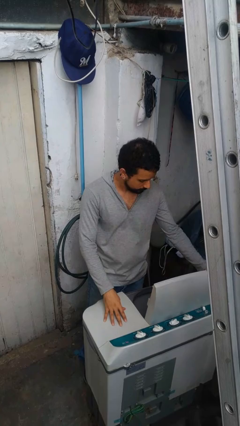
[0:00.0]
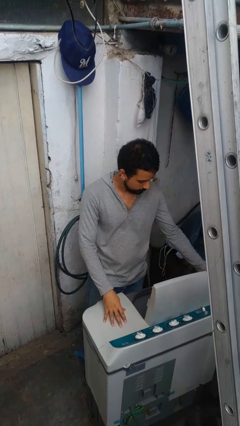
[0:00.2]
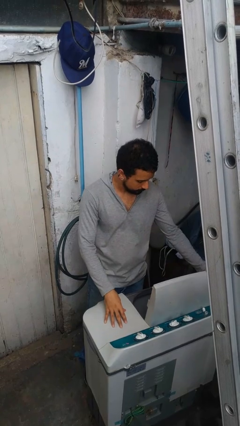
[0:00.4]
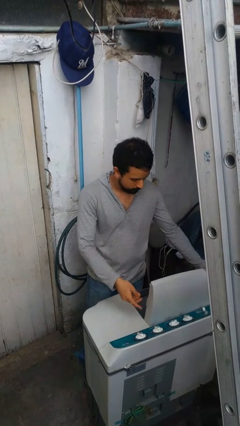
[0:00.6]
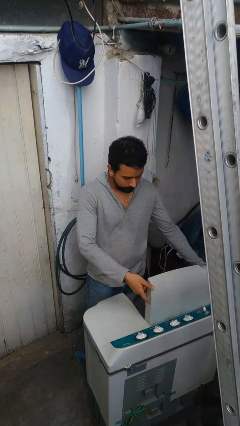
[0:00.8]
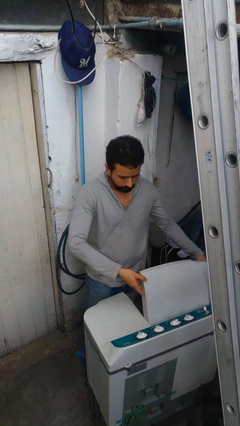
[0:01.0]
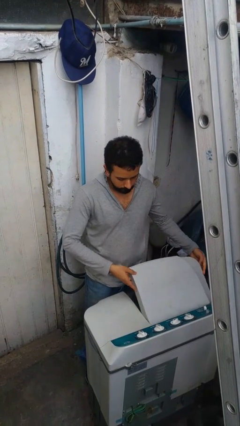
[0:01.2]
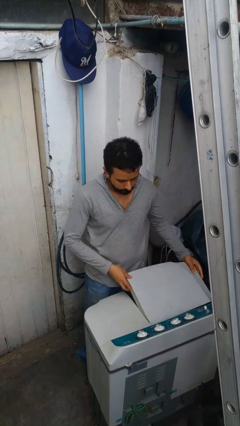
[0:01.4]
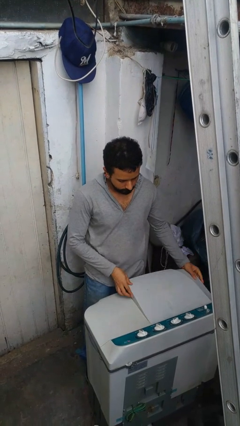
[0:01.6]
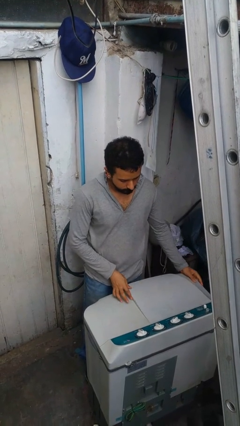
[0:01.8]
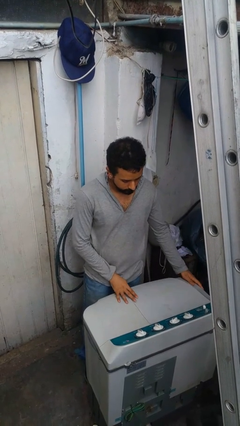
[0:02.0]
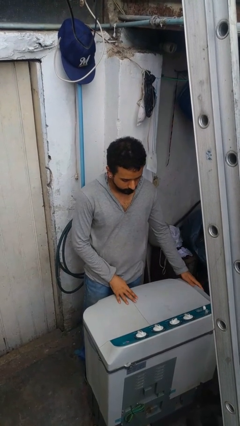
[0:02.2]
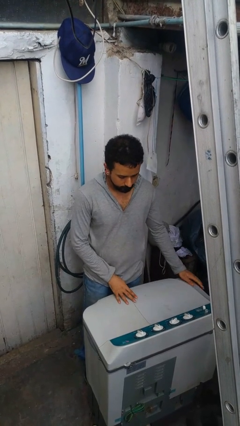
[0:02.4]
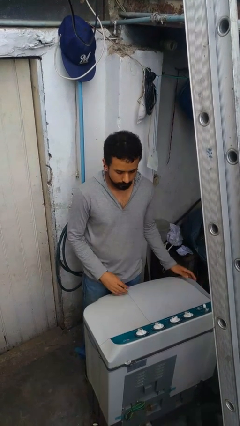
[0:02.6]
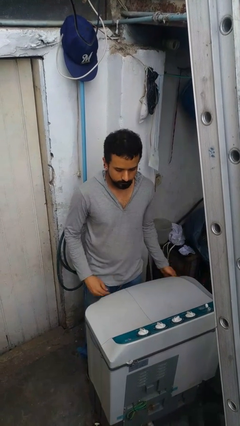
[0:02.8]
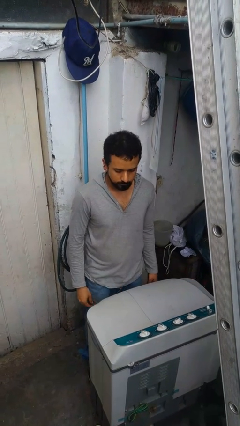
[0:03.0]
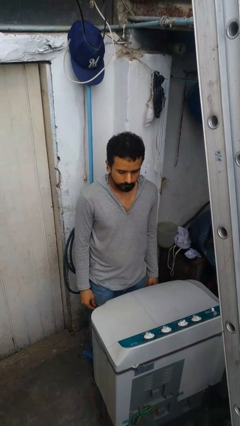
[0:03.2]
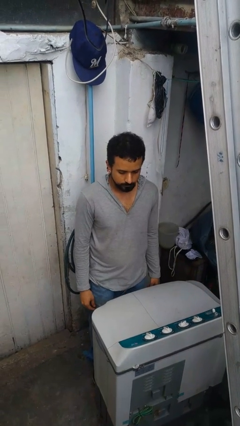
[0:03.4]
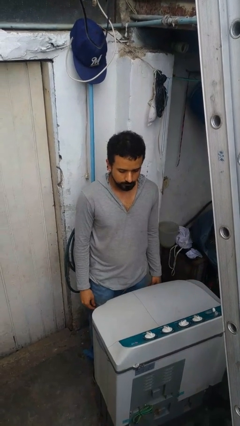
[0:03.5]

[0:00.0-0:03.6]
person closes clothes washer

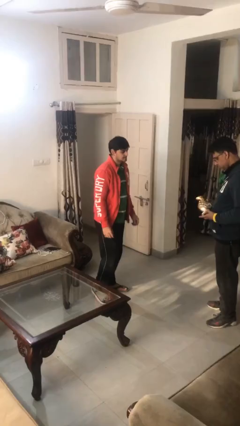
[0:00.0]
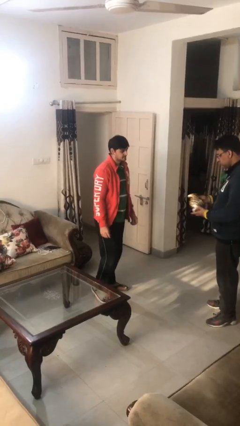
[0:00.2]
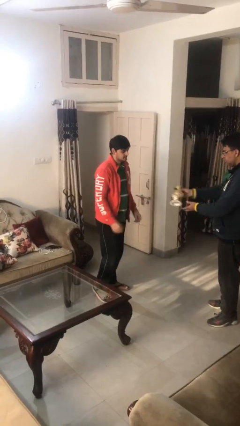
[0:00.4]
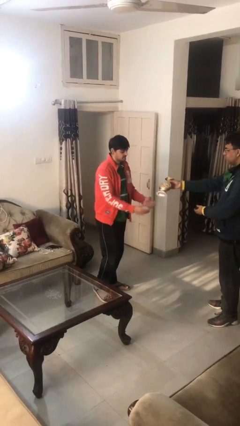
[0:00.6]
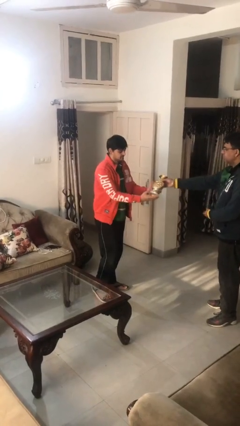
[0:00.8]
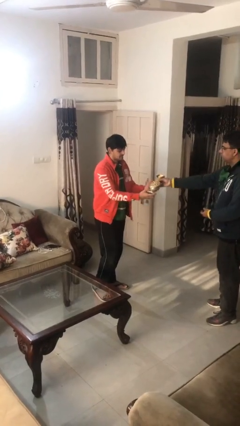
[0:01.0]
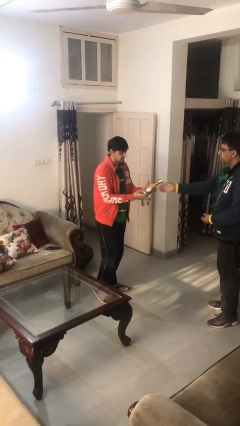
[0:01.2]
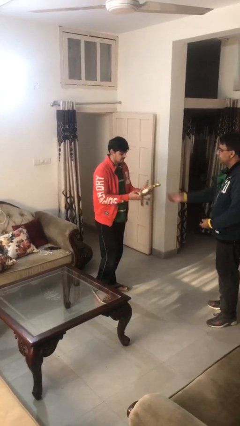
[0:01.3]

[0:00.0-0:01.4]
person transfers object to person

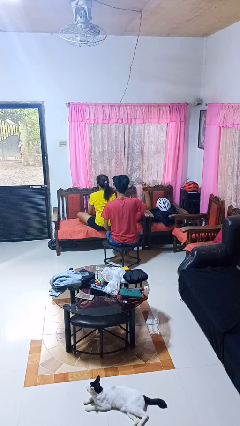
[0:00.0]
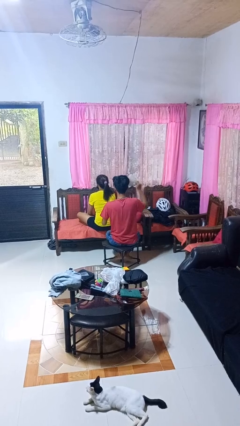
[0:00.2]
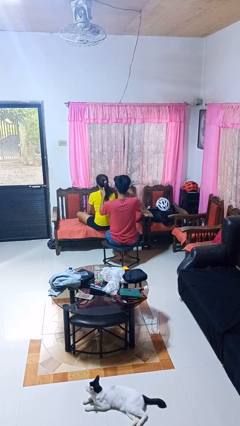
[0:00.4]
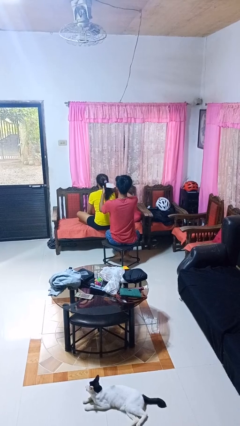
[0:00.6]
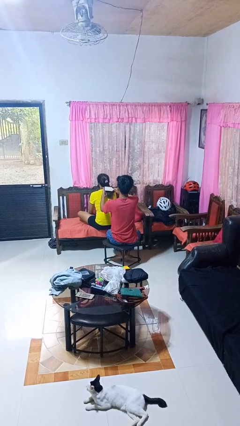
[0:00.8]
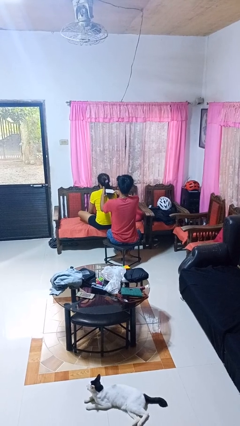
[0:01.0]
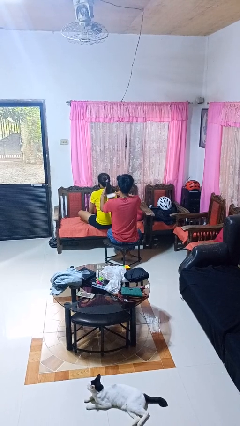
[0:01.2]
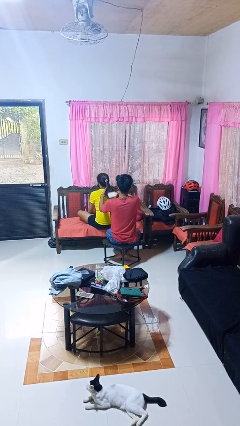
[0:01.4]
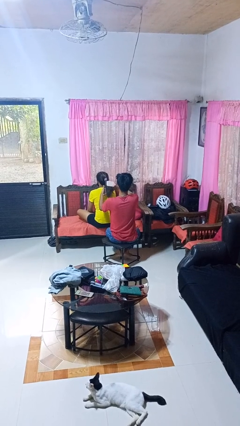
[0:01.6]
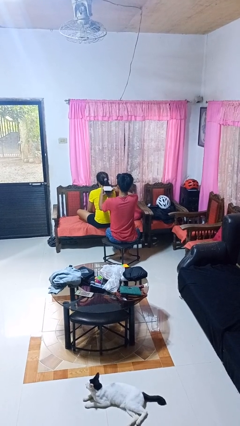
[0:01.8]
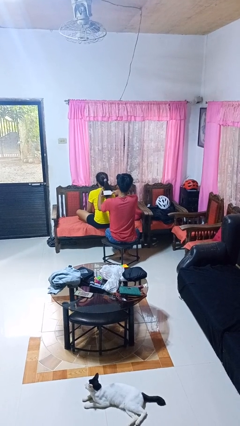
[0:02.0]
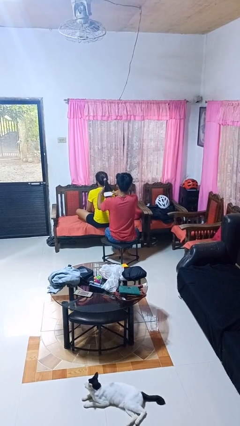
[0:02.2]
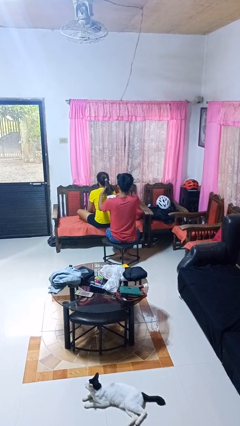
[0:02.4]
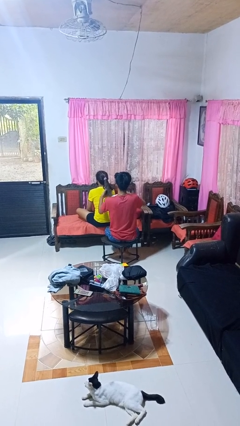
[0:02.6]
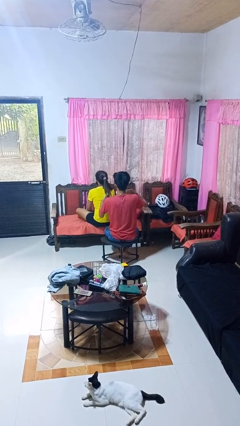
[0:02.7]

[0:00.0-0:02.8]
person brushes hair of person

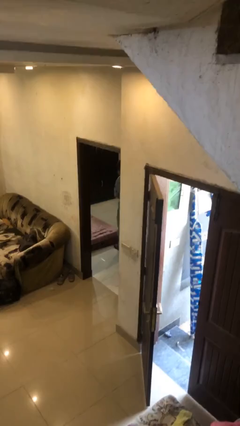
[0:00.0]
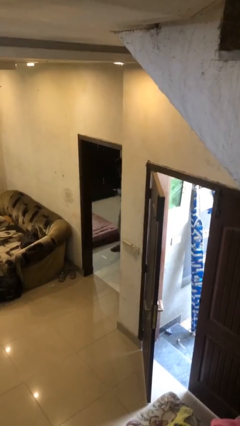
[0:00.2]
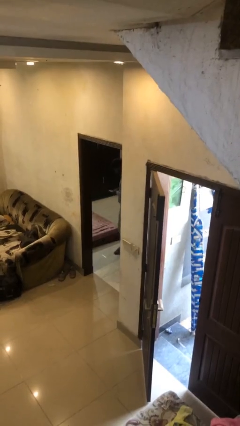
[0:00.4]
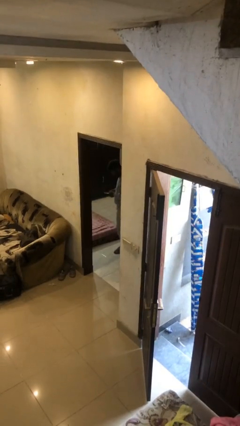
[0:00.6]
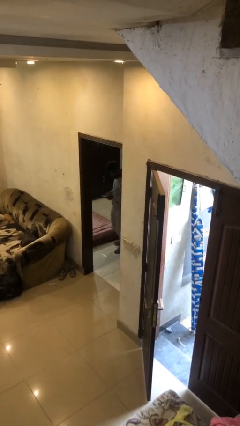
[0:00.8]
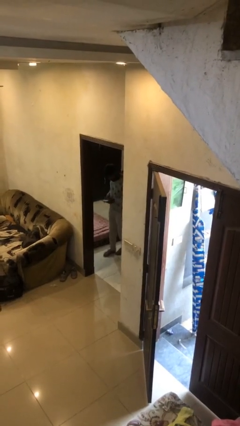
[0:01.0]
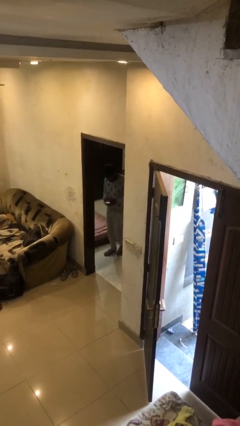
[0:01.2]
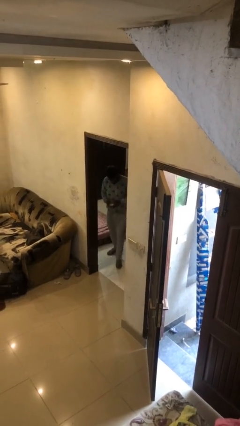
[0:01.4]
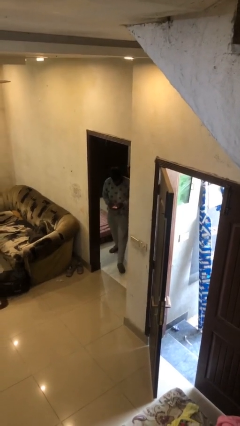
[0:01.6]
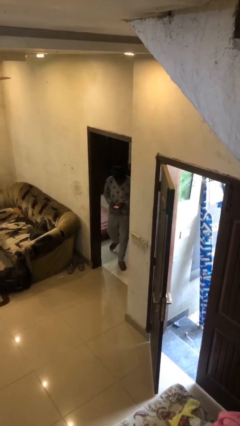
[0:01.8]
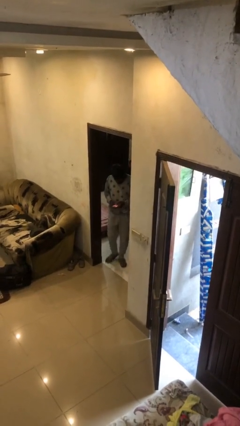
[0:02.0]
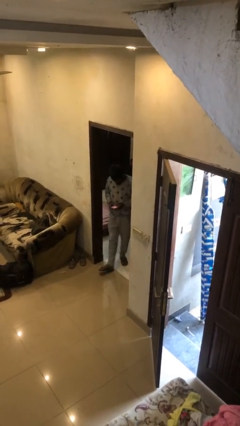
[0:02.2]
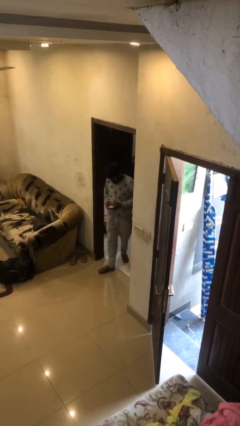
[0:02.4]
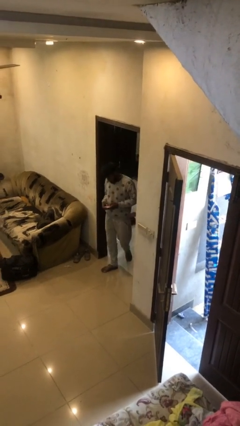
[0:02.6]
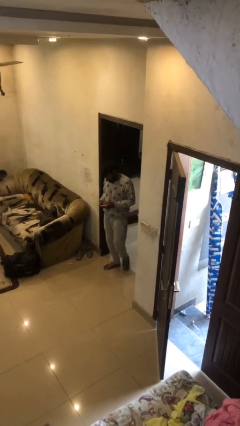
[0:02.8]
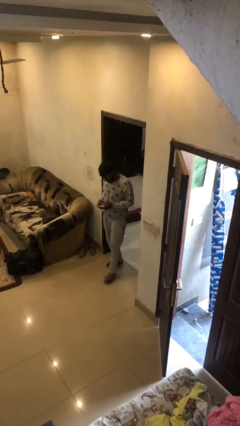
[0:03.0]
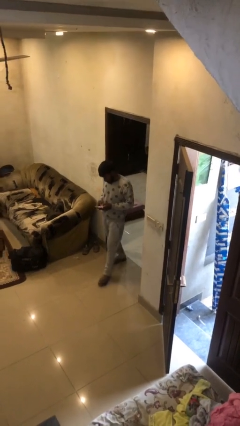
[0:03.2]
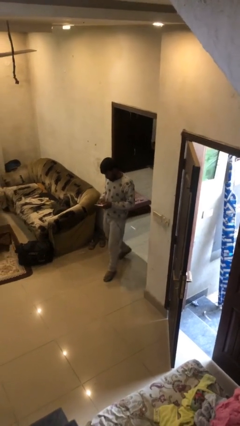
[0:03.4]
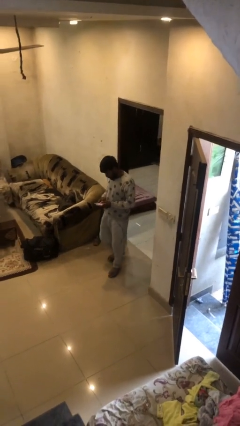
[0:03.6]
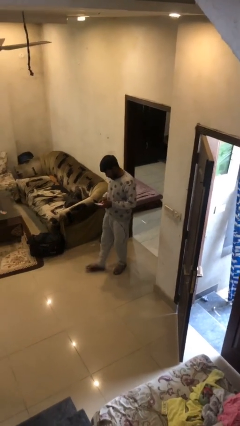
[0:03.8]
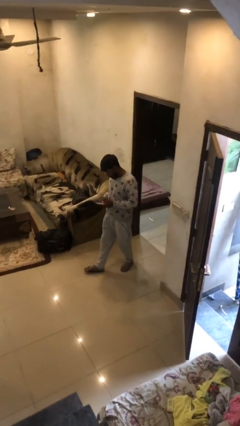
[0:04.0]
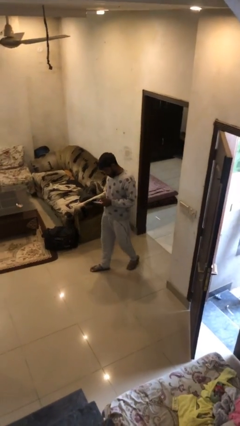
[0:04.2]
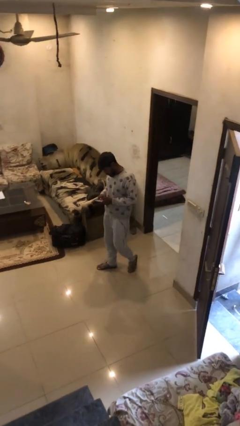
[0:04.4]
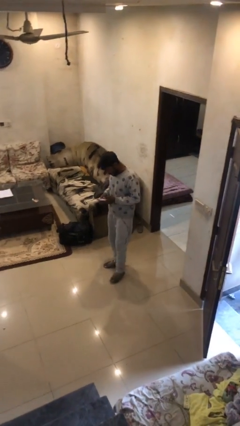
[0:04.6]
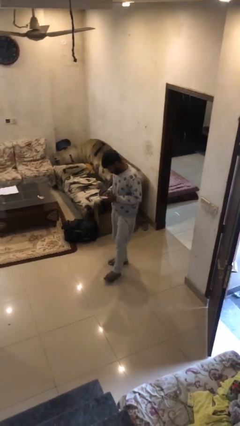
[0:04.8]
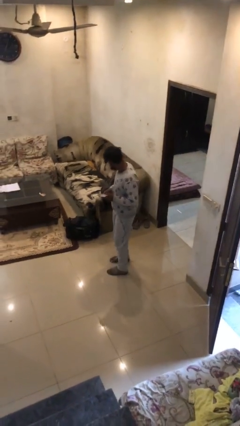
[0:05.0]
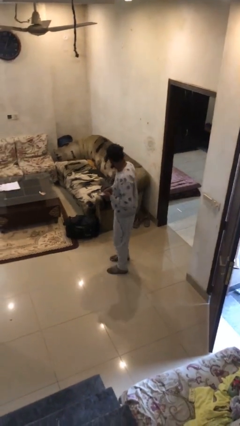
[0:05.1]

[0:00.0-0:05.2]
person enters scene through structure

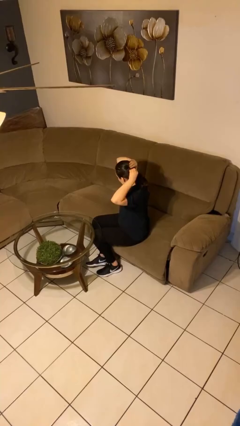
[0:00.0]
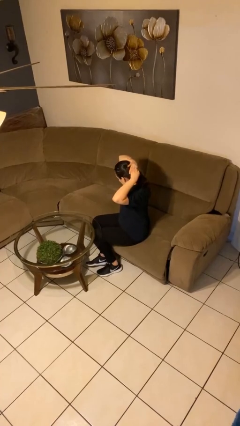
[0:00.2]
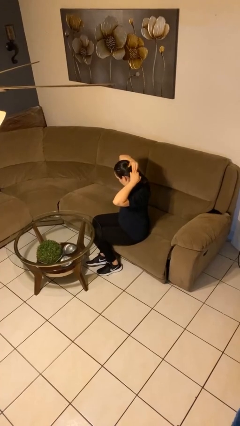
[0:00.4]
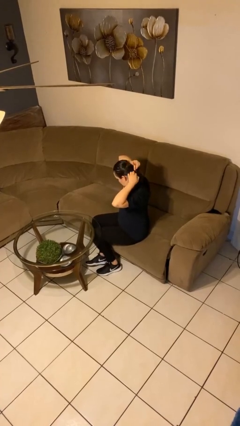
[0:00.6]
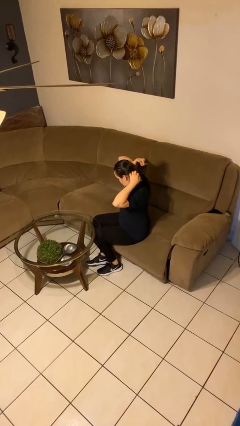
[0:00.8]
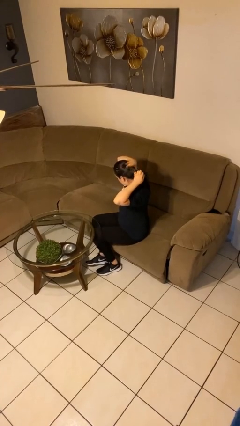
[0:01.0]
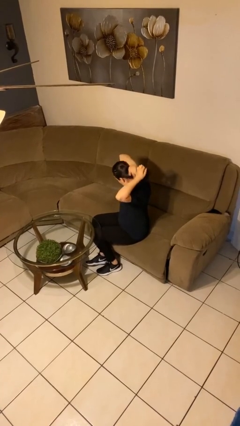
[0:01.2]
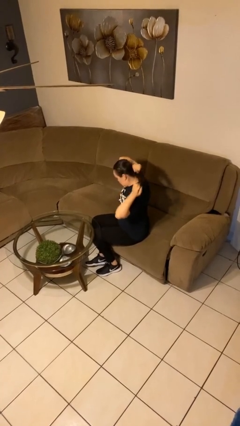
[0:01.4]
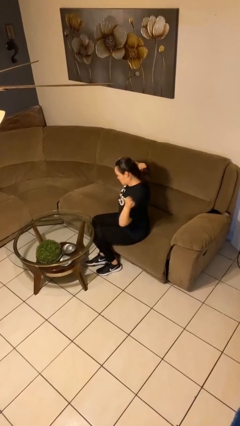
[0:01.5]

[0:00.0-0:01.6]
person takes off hairtie

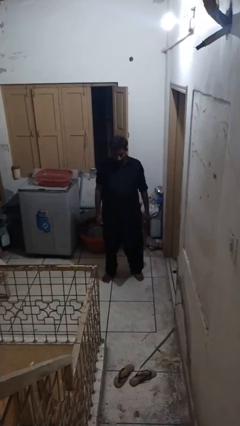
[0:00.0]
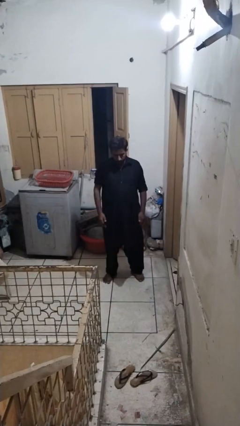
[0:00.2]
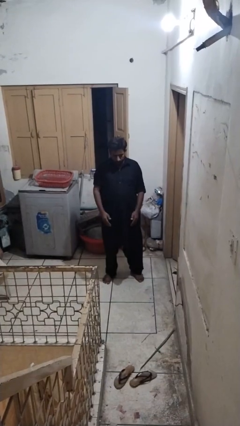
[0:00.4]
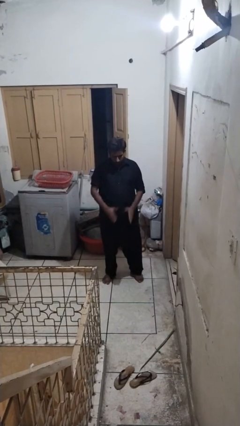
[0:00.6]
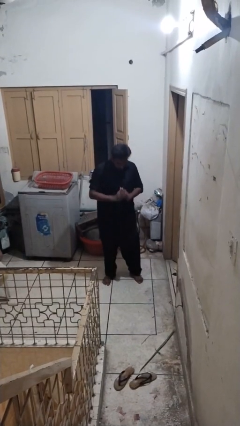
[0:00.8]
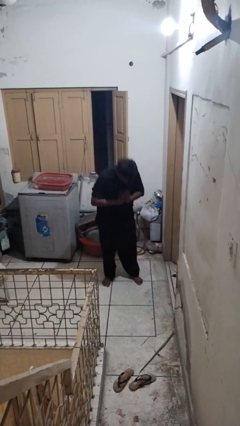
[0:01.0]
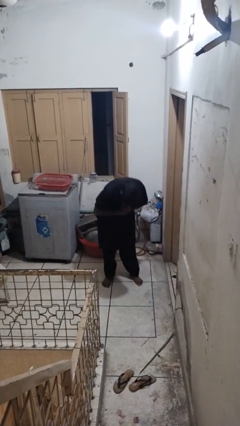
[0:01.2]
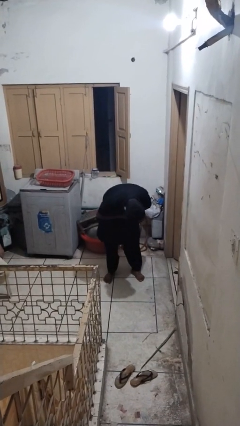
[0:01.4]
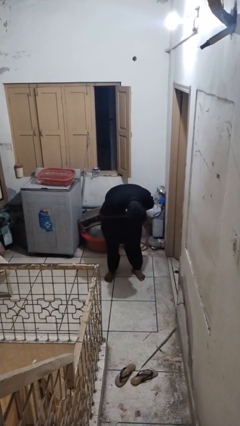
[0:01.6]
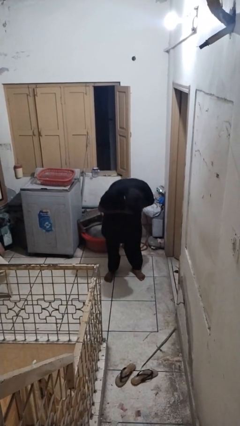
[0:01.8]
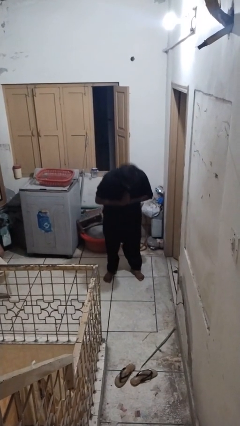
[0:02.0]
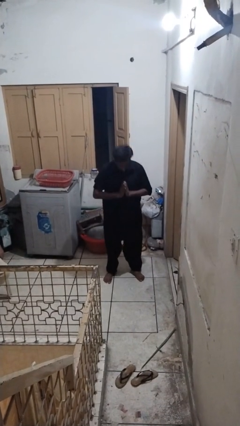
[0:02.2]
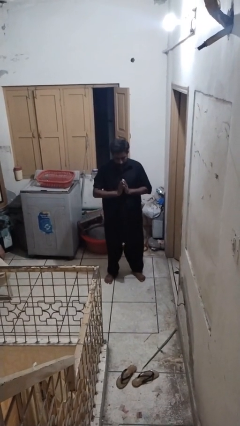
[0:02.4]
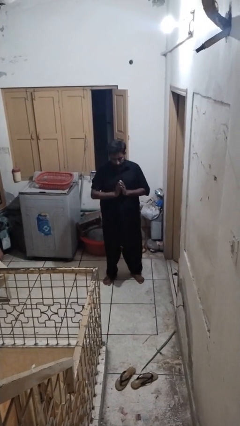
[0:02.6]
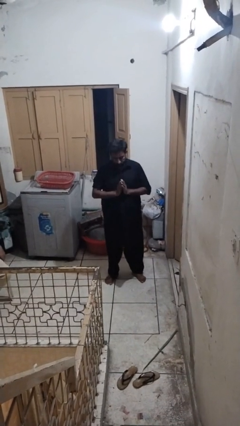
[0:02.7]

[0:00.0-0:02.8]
person bows

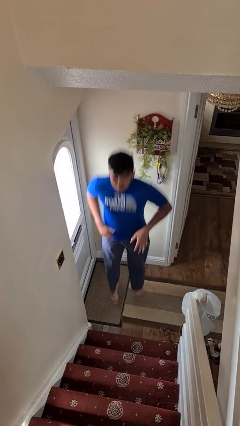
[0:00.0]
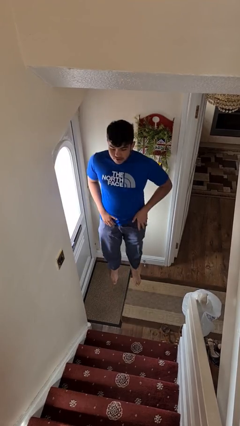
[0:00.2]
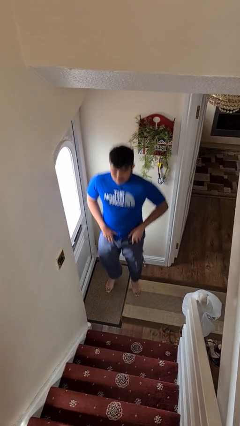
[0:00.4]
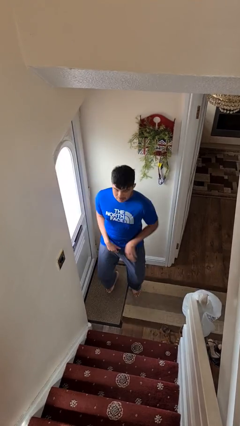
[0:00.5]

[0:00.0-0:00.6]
person jumps
